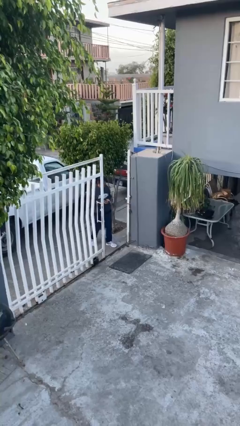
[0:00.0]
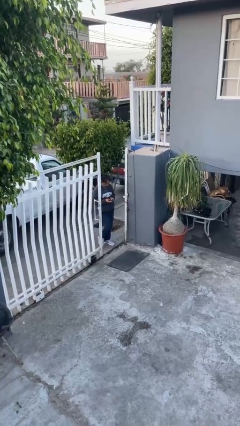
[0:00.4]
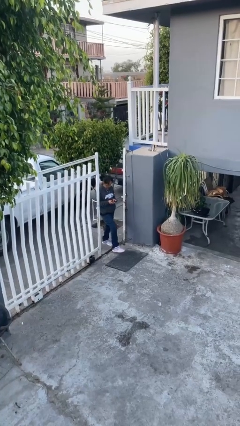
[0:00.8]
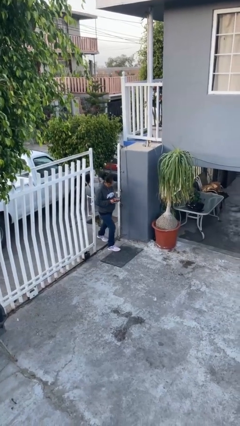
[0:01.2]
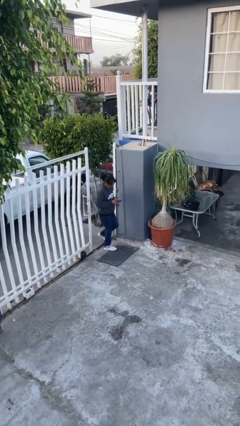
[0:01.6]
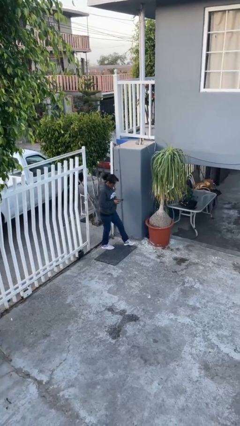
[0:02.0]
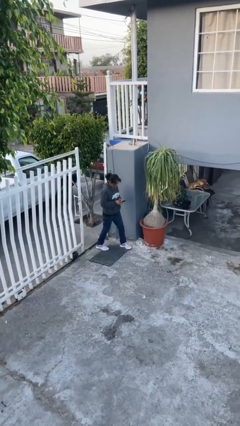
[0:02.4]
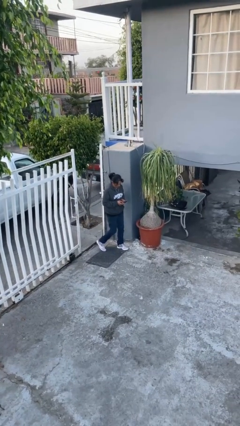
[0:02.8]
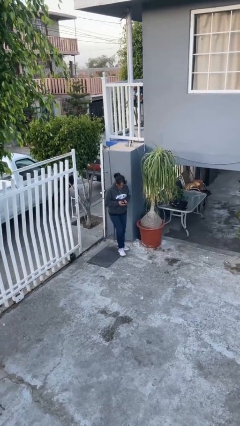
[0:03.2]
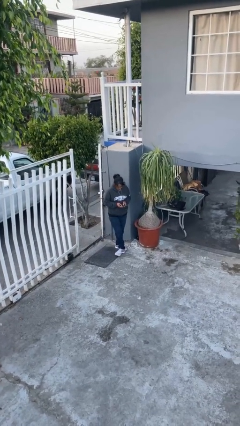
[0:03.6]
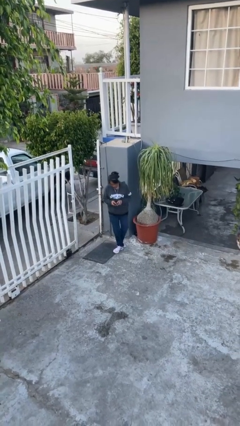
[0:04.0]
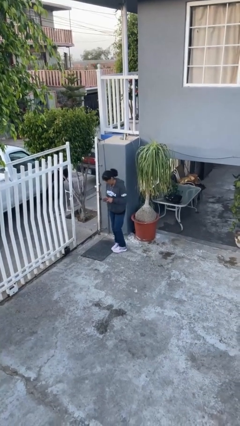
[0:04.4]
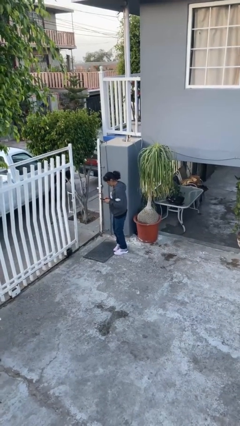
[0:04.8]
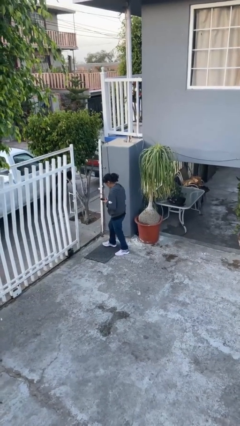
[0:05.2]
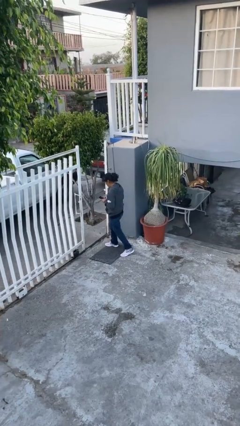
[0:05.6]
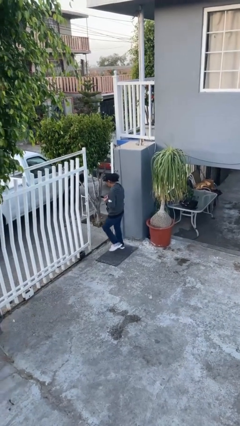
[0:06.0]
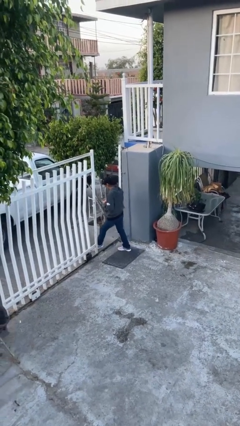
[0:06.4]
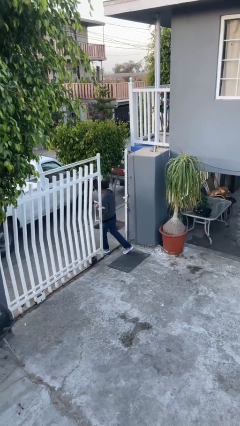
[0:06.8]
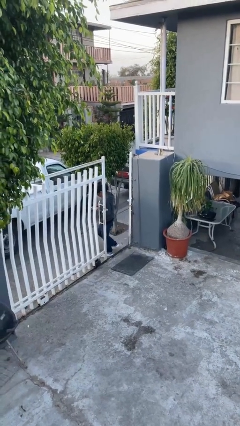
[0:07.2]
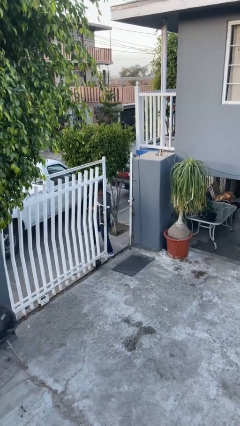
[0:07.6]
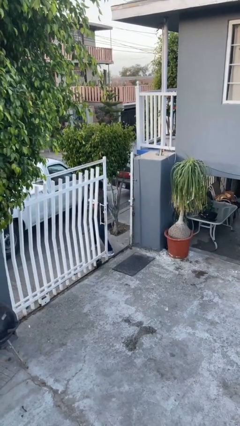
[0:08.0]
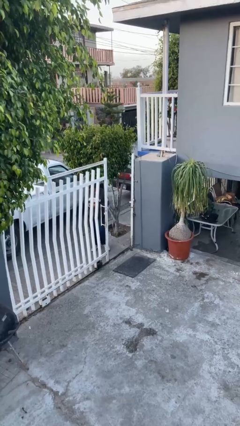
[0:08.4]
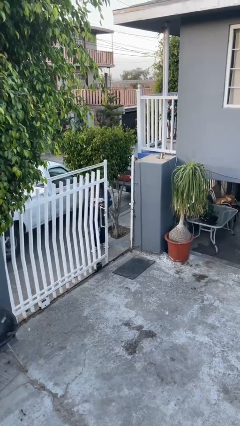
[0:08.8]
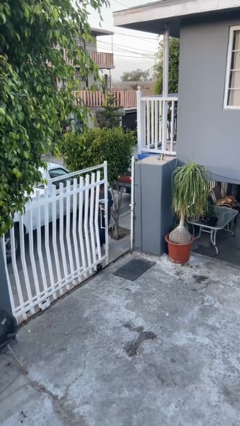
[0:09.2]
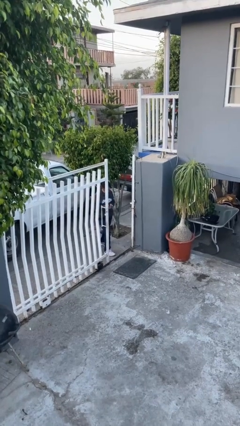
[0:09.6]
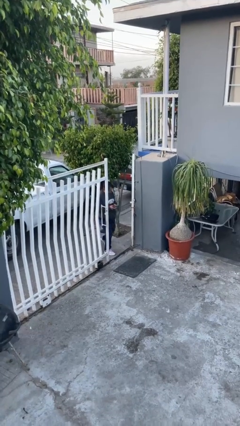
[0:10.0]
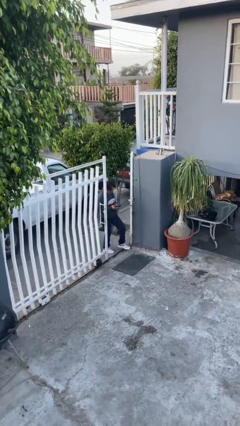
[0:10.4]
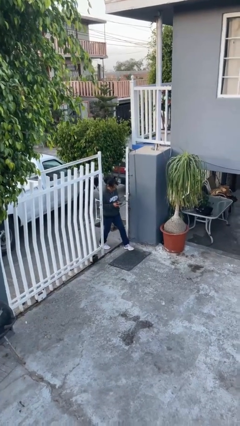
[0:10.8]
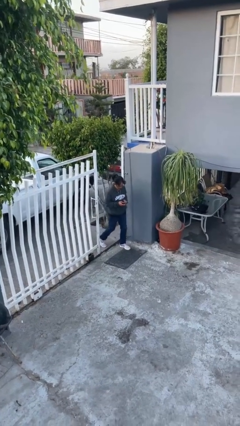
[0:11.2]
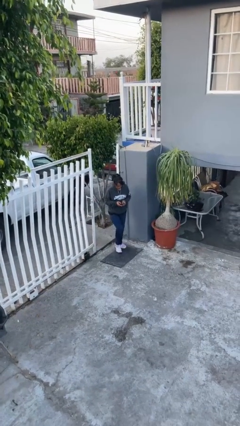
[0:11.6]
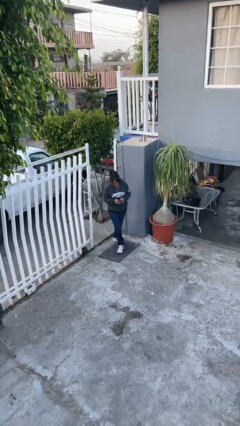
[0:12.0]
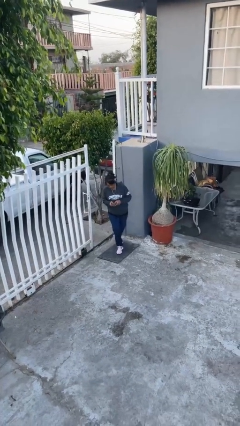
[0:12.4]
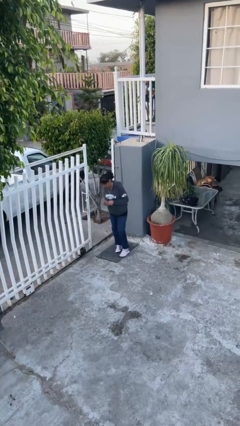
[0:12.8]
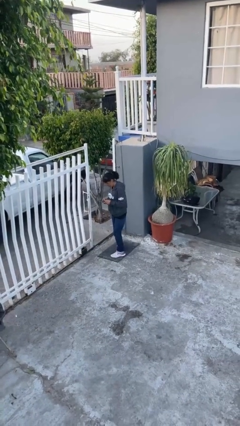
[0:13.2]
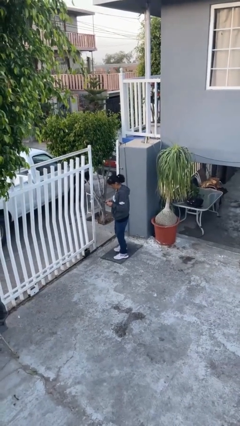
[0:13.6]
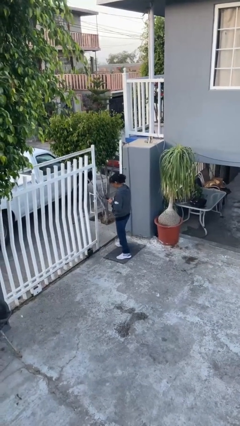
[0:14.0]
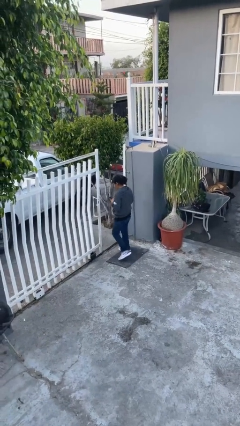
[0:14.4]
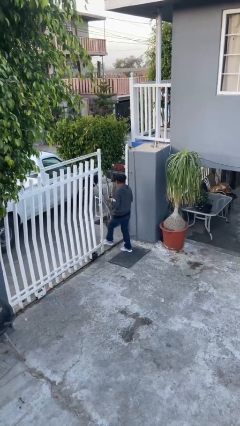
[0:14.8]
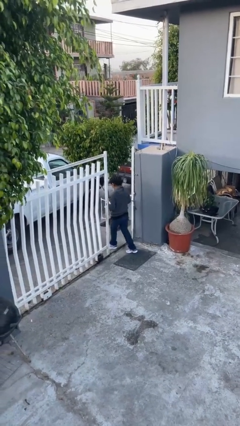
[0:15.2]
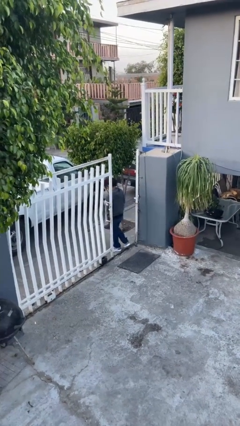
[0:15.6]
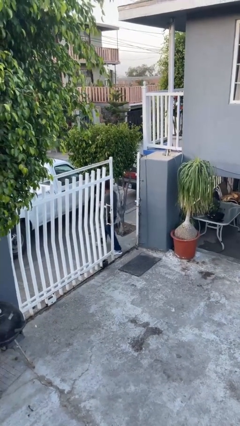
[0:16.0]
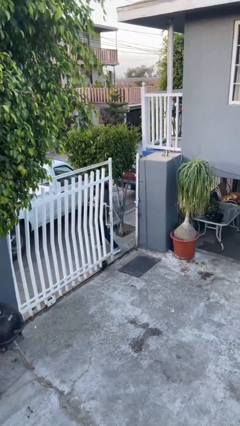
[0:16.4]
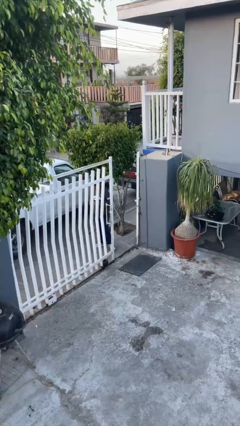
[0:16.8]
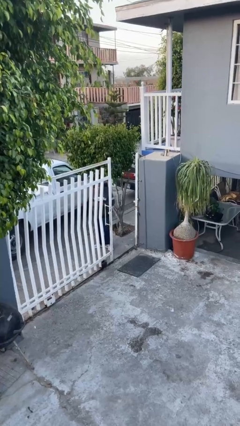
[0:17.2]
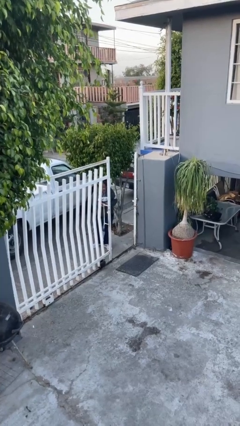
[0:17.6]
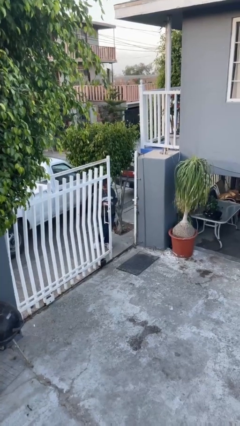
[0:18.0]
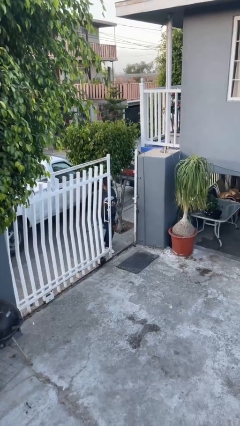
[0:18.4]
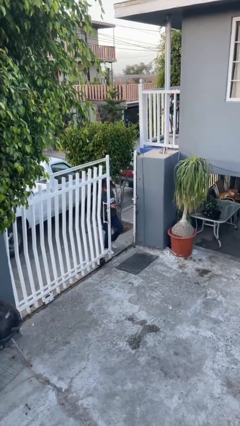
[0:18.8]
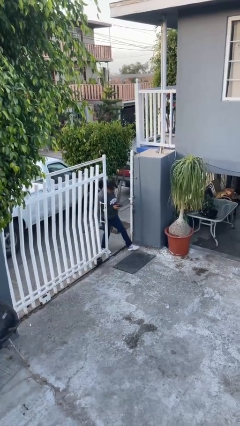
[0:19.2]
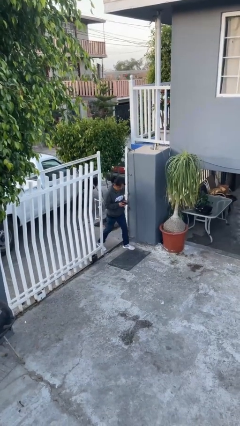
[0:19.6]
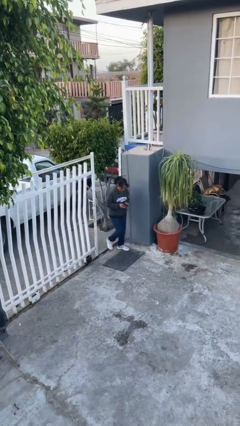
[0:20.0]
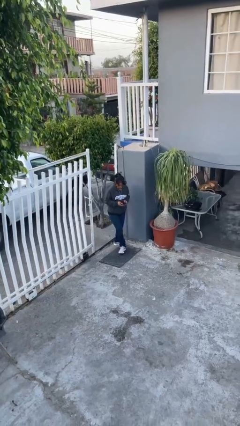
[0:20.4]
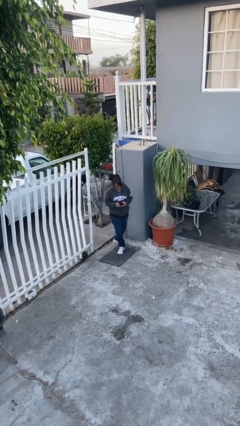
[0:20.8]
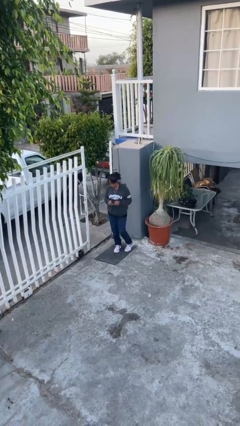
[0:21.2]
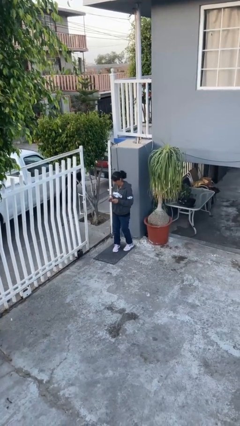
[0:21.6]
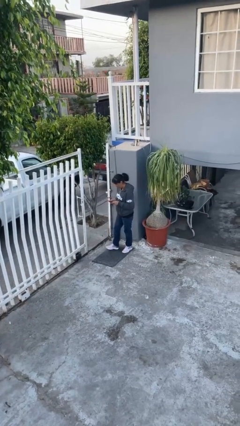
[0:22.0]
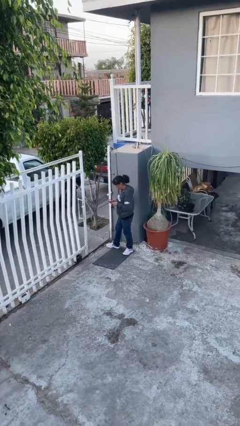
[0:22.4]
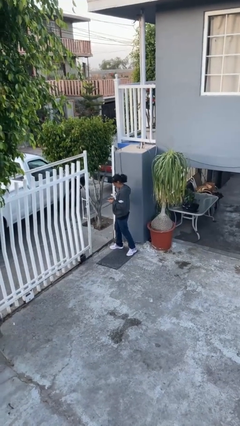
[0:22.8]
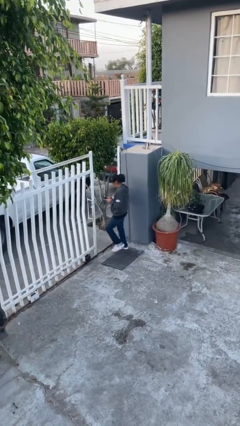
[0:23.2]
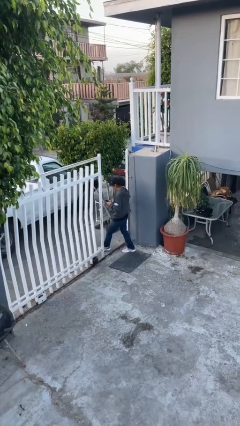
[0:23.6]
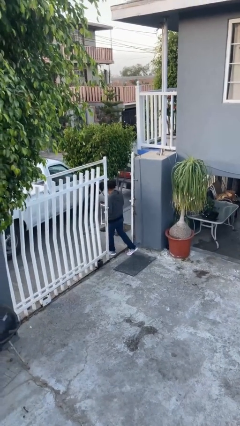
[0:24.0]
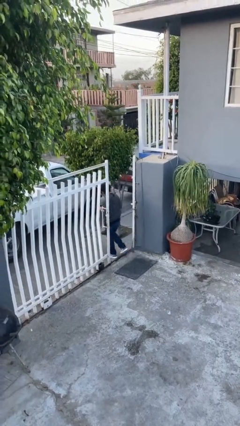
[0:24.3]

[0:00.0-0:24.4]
person texts on phone

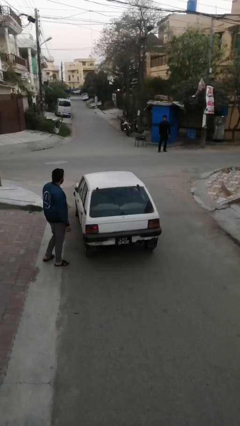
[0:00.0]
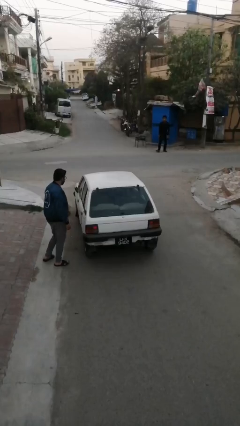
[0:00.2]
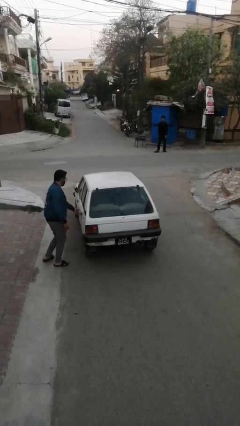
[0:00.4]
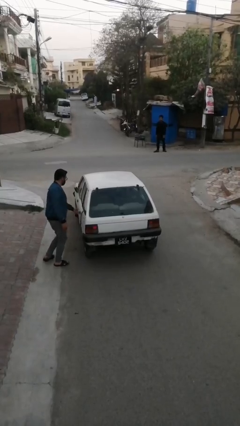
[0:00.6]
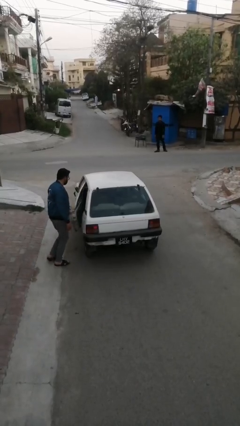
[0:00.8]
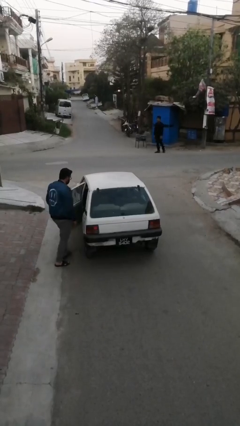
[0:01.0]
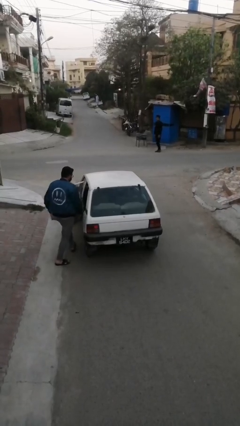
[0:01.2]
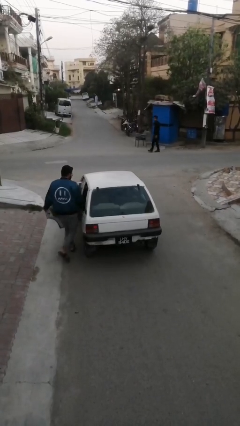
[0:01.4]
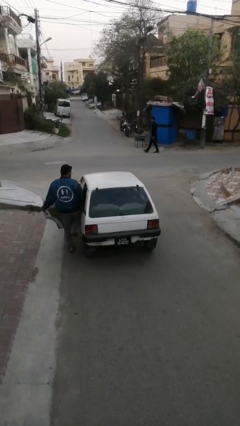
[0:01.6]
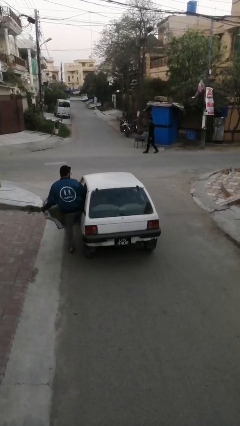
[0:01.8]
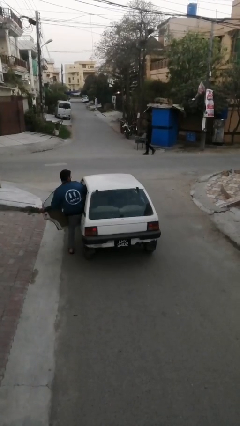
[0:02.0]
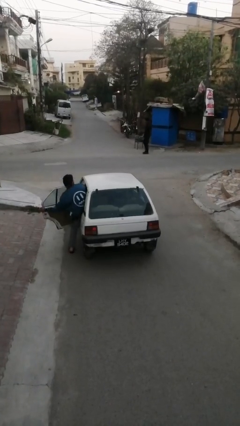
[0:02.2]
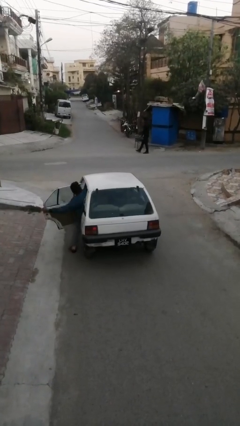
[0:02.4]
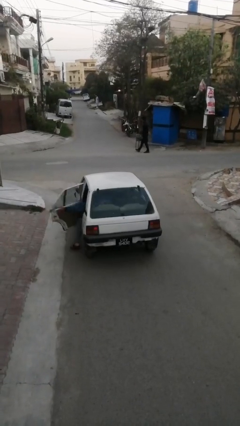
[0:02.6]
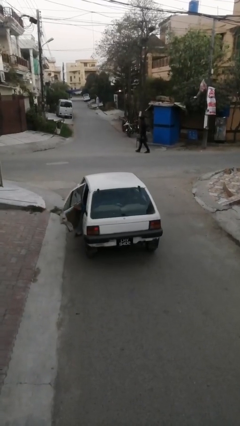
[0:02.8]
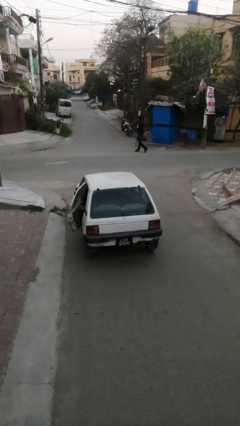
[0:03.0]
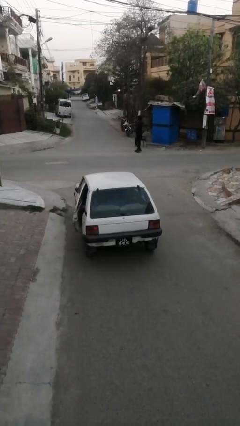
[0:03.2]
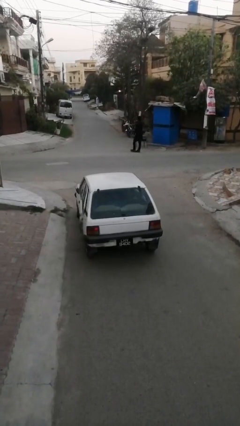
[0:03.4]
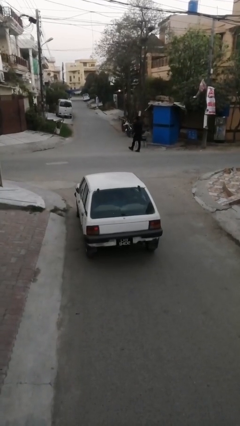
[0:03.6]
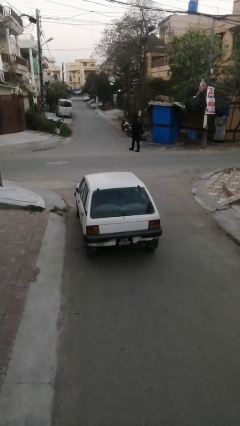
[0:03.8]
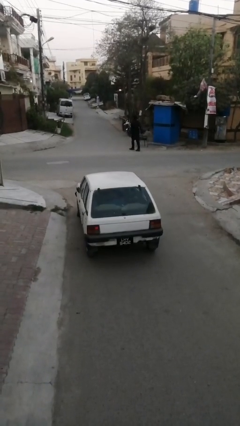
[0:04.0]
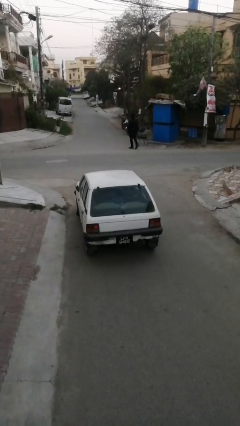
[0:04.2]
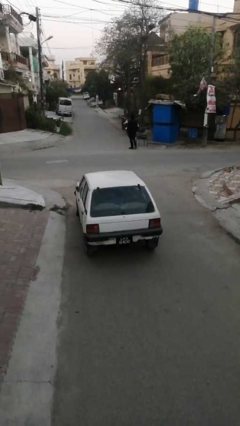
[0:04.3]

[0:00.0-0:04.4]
car picks up person

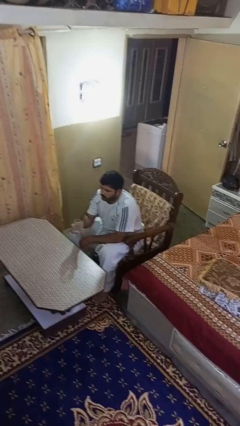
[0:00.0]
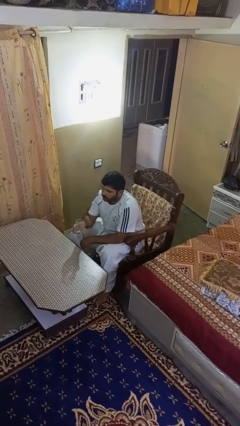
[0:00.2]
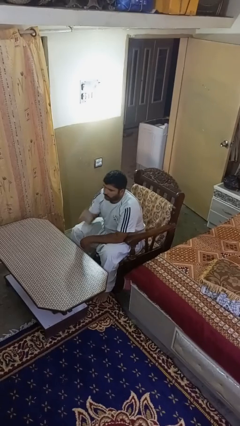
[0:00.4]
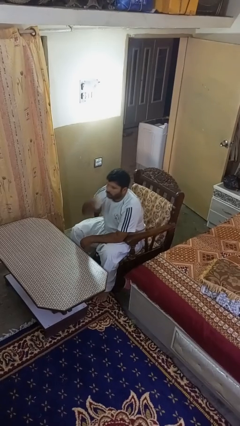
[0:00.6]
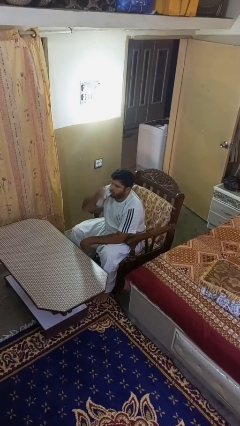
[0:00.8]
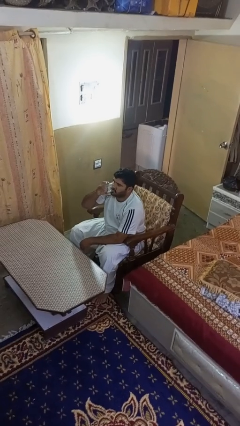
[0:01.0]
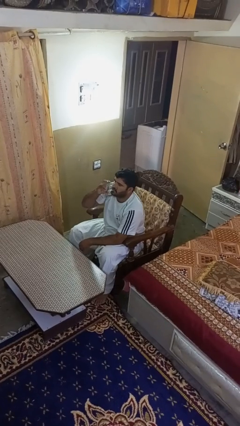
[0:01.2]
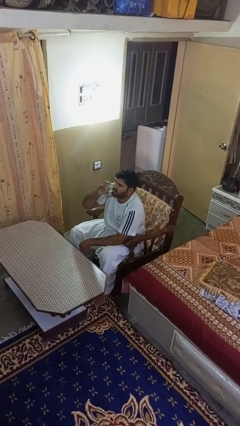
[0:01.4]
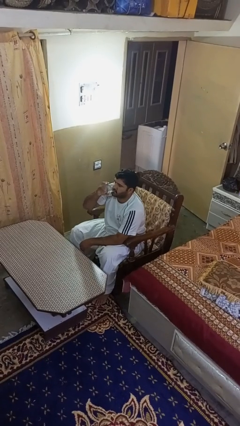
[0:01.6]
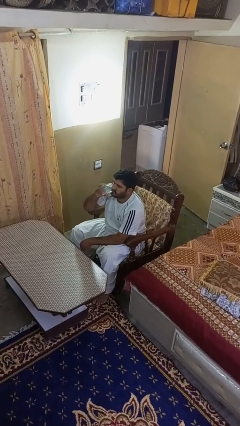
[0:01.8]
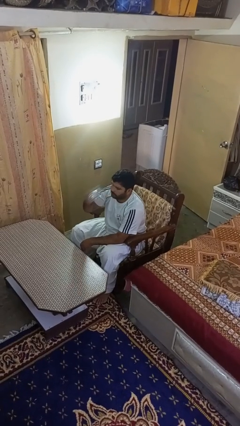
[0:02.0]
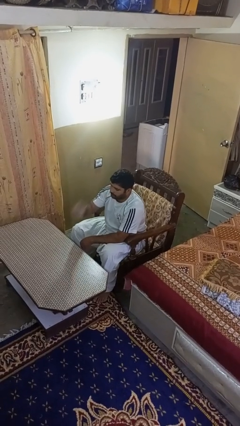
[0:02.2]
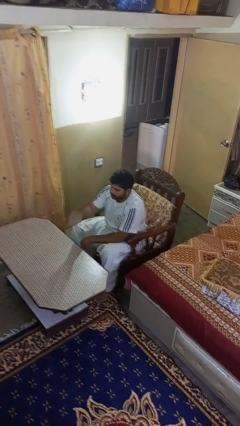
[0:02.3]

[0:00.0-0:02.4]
person drinks from shotglass
